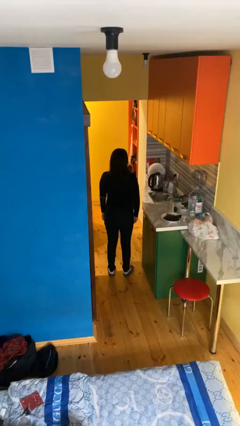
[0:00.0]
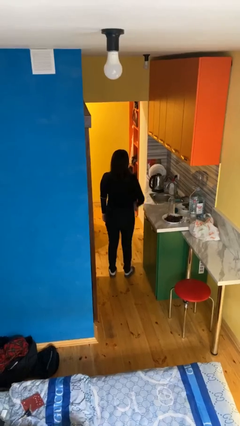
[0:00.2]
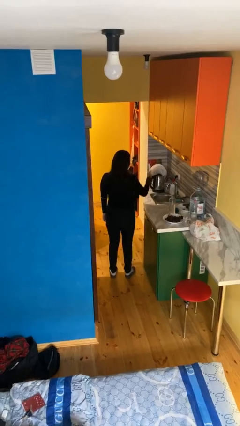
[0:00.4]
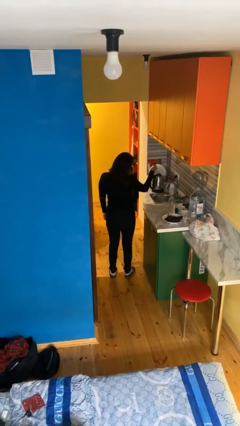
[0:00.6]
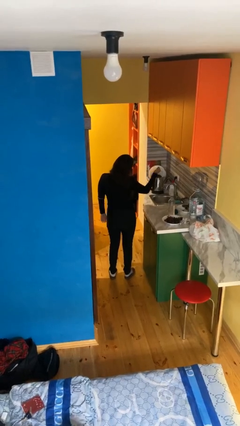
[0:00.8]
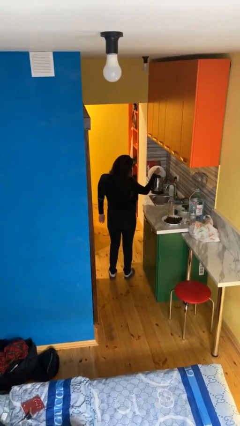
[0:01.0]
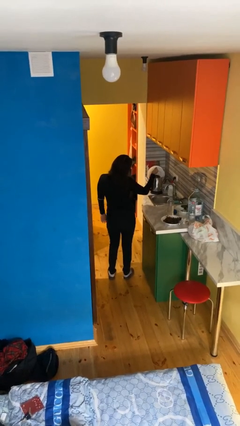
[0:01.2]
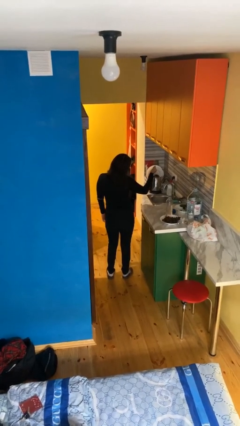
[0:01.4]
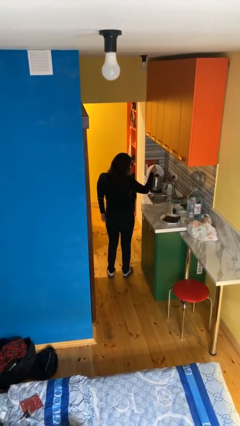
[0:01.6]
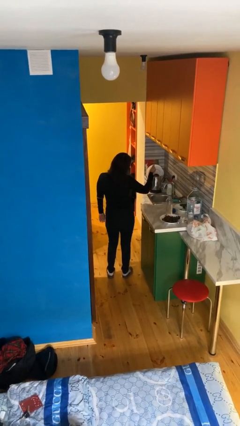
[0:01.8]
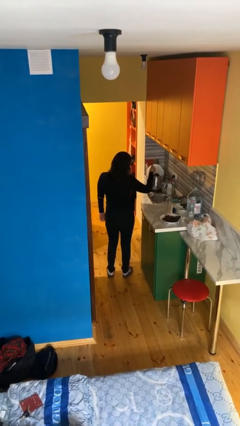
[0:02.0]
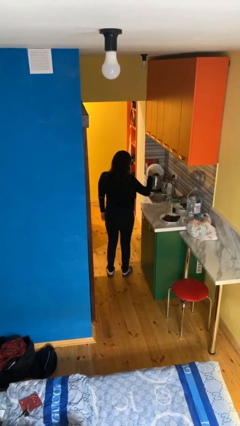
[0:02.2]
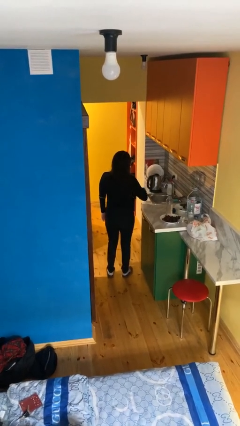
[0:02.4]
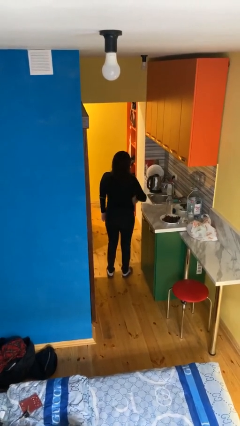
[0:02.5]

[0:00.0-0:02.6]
person gestures thumbs up

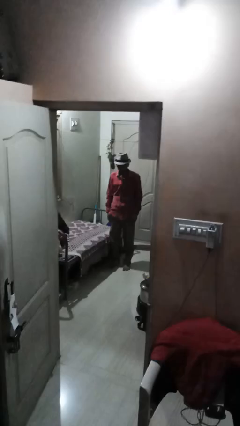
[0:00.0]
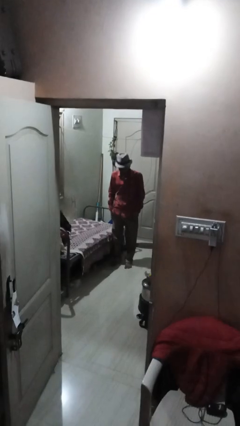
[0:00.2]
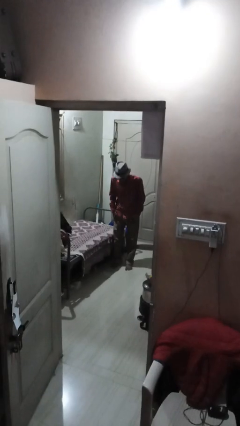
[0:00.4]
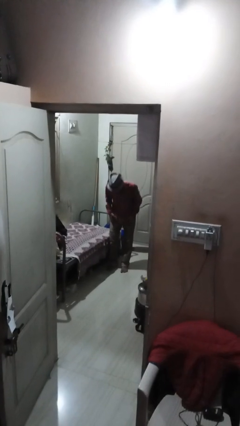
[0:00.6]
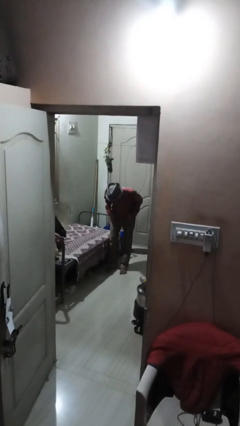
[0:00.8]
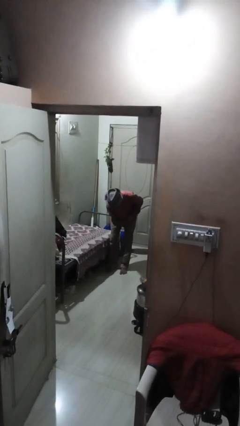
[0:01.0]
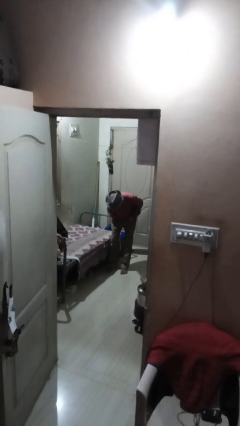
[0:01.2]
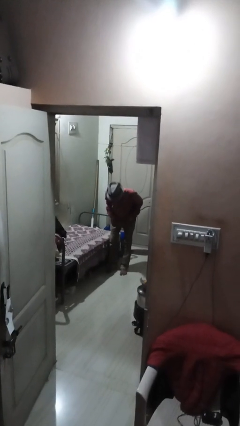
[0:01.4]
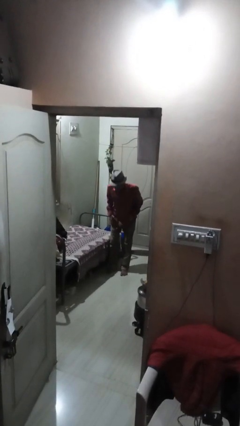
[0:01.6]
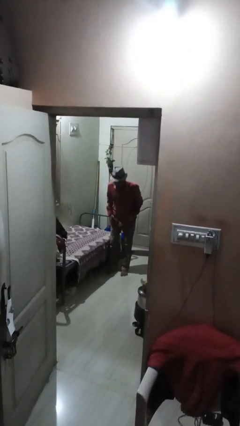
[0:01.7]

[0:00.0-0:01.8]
person bows

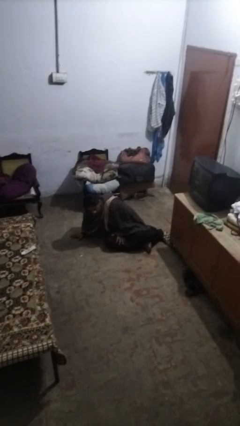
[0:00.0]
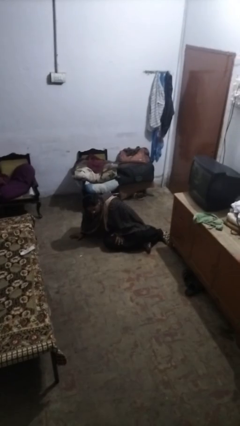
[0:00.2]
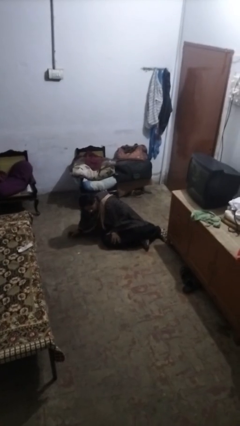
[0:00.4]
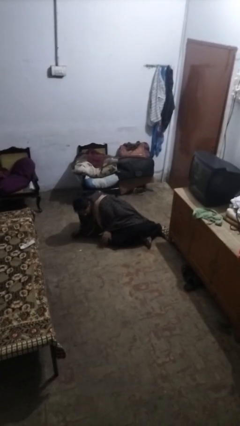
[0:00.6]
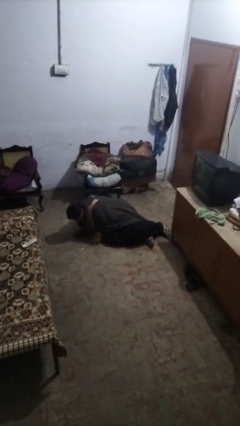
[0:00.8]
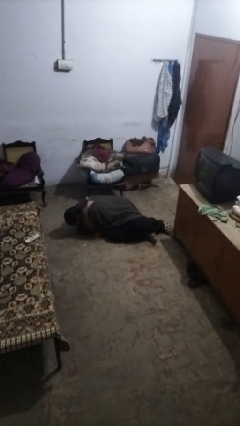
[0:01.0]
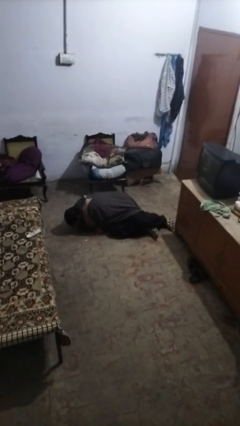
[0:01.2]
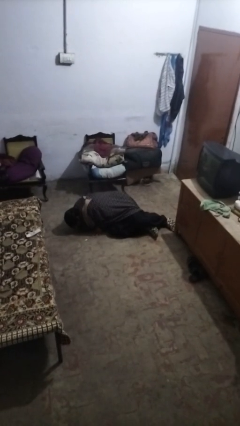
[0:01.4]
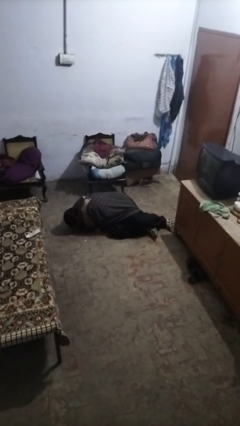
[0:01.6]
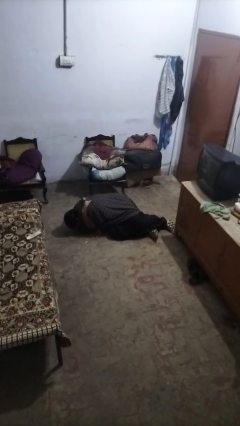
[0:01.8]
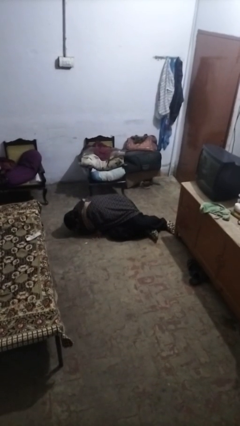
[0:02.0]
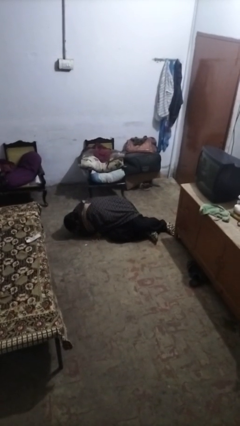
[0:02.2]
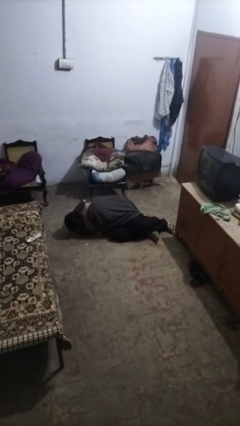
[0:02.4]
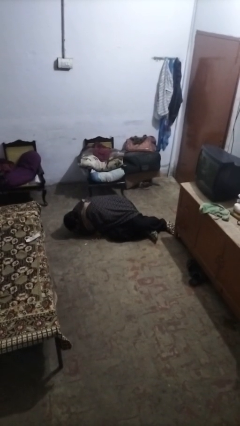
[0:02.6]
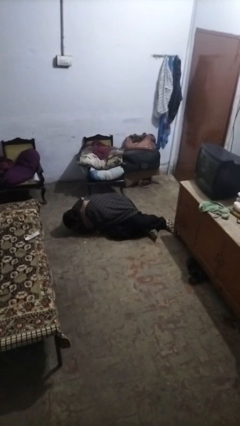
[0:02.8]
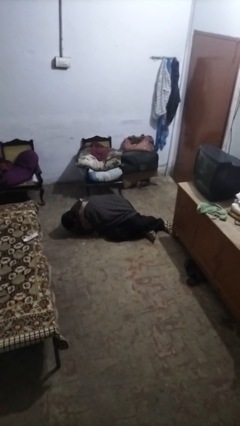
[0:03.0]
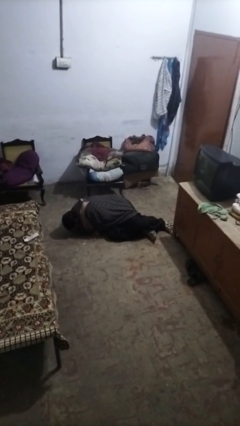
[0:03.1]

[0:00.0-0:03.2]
person lies down on floor

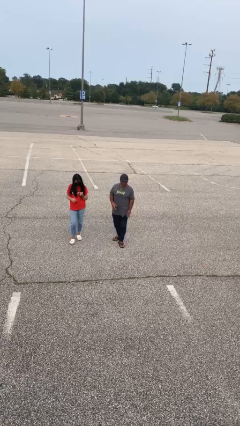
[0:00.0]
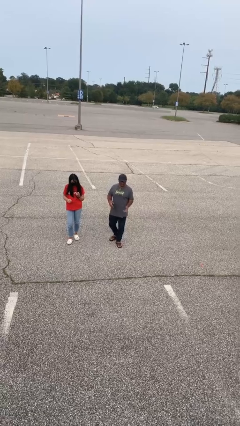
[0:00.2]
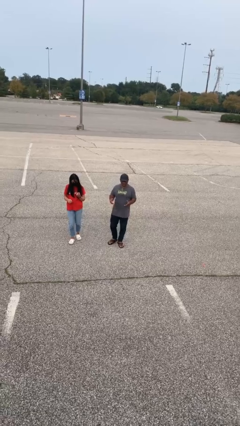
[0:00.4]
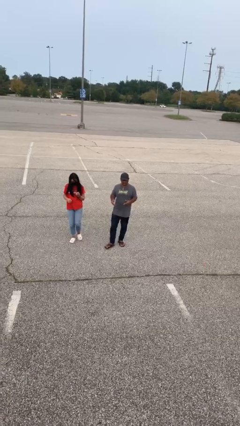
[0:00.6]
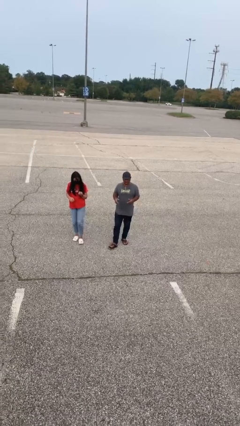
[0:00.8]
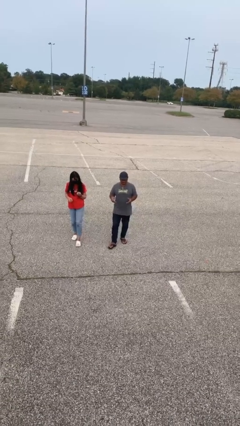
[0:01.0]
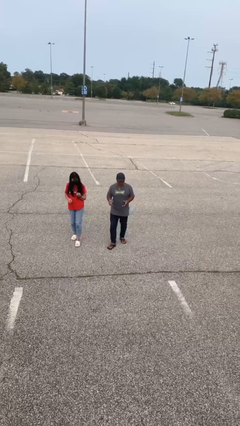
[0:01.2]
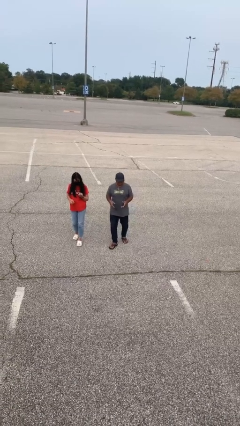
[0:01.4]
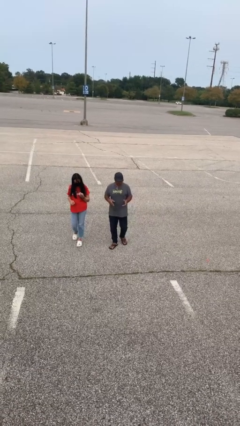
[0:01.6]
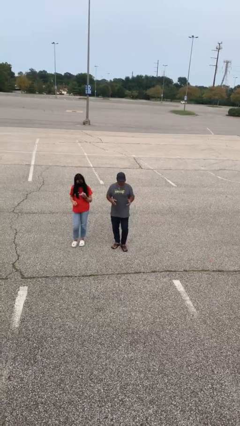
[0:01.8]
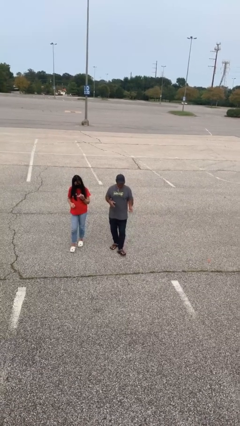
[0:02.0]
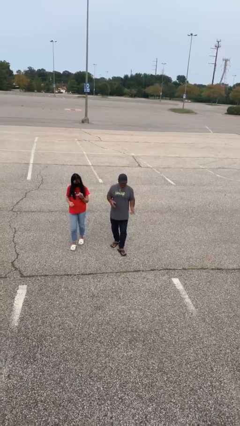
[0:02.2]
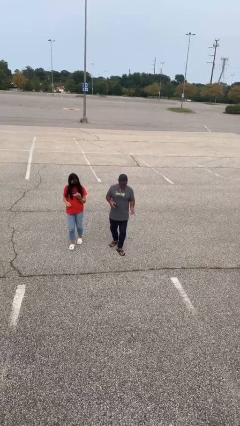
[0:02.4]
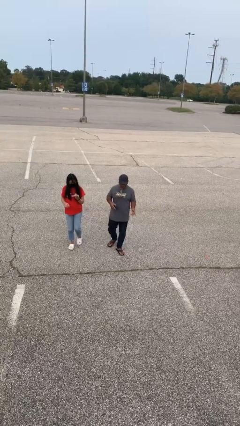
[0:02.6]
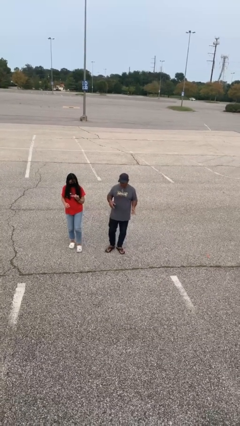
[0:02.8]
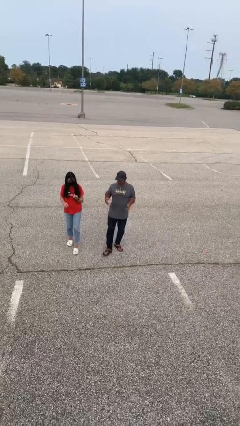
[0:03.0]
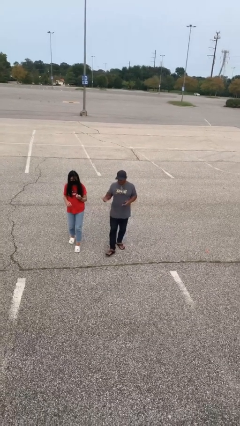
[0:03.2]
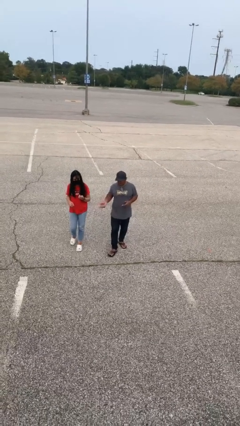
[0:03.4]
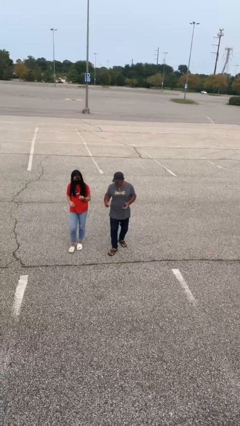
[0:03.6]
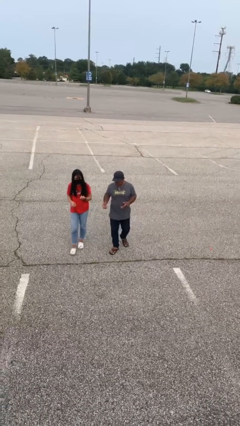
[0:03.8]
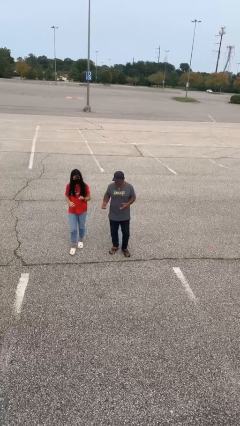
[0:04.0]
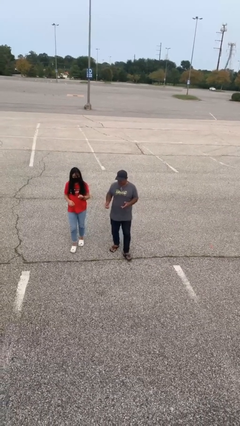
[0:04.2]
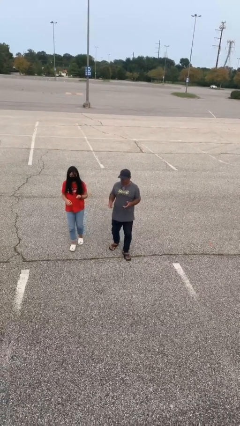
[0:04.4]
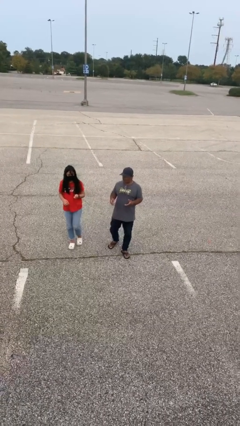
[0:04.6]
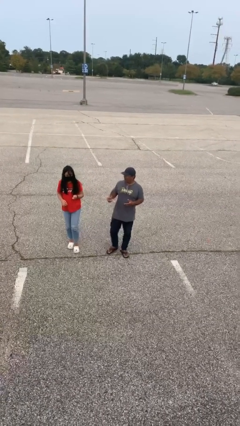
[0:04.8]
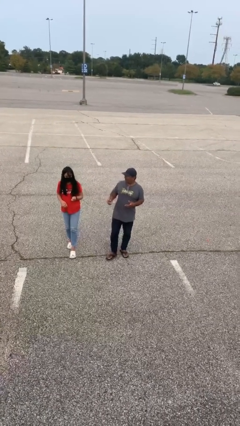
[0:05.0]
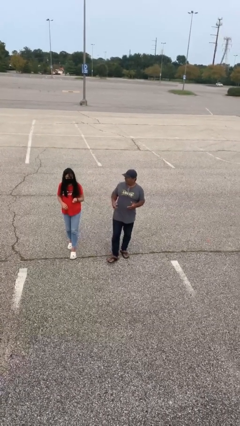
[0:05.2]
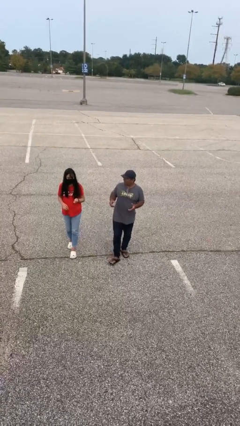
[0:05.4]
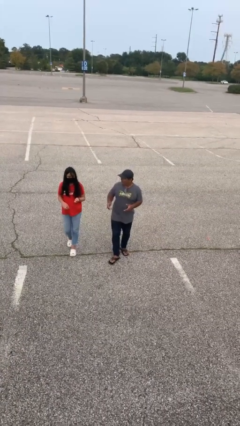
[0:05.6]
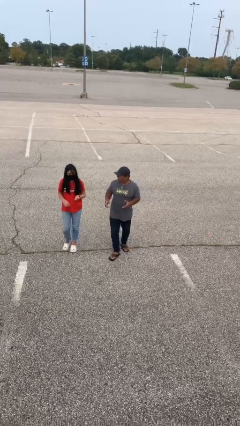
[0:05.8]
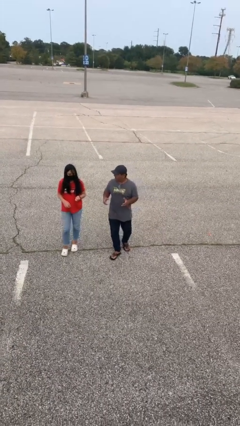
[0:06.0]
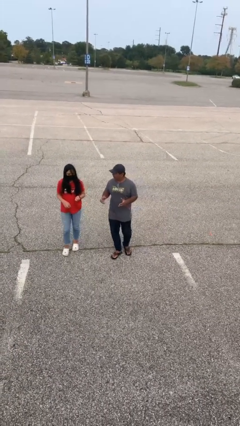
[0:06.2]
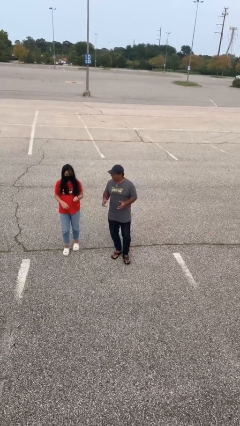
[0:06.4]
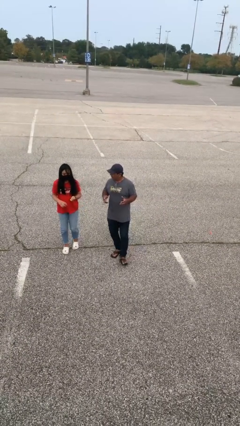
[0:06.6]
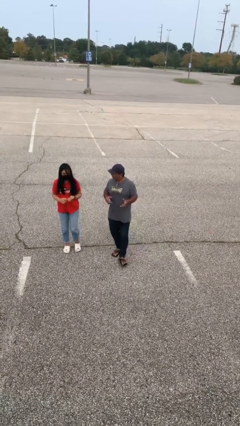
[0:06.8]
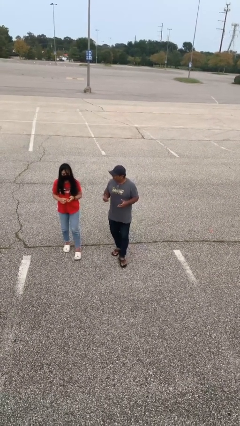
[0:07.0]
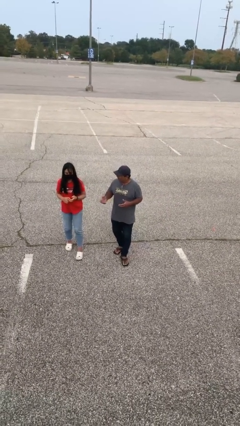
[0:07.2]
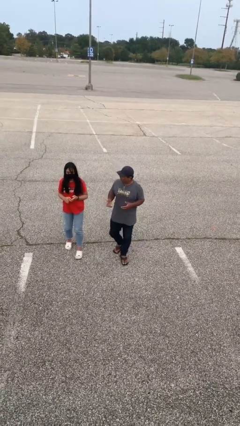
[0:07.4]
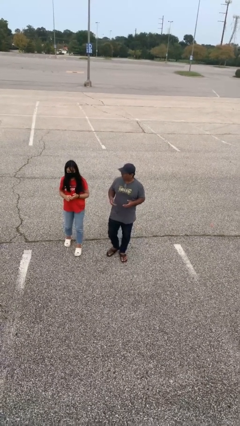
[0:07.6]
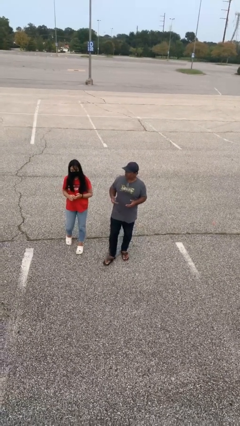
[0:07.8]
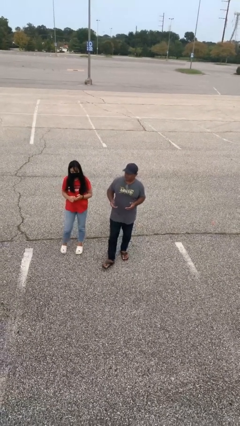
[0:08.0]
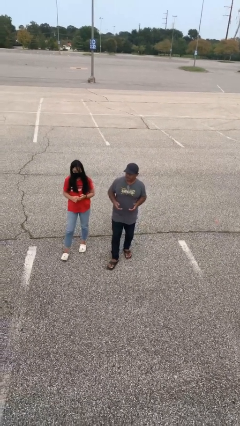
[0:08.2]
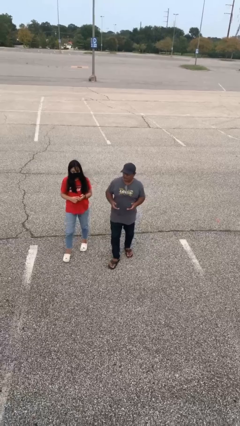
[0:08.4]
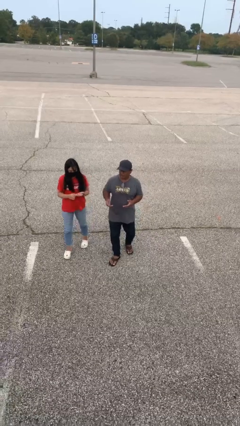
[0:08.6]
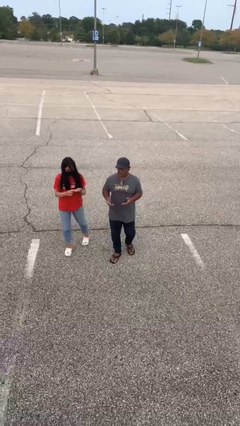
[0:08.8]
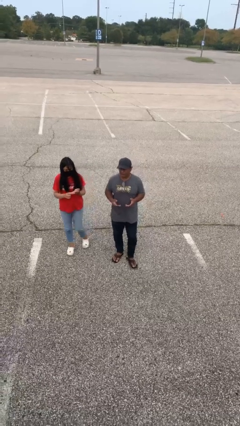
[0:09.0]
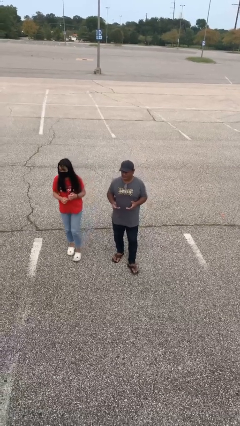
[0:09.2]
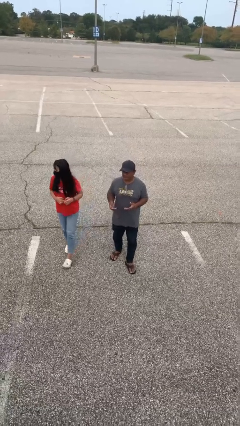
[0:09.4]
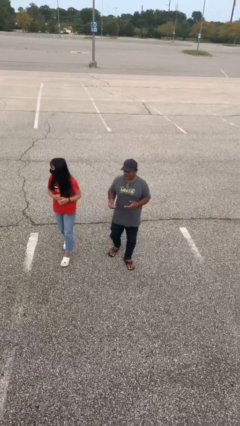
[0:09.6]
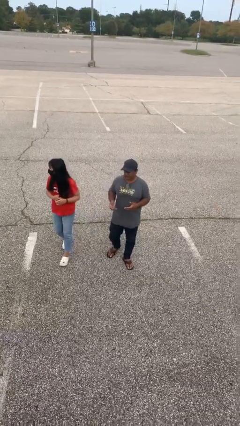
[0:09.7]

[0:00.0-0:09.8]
person talks to person

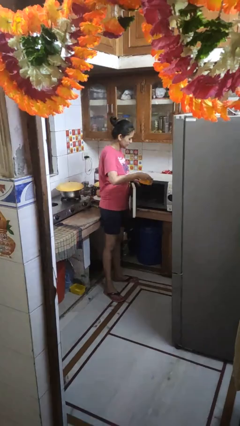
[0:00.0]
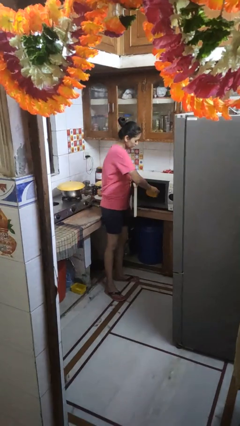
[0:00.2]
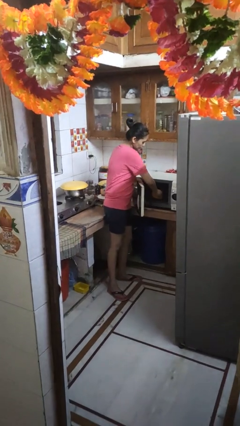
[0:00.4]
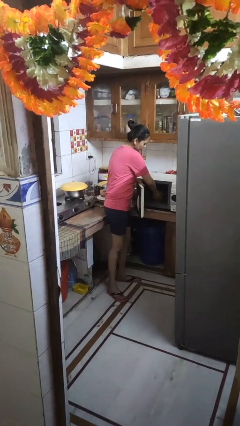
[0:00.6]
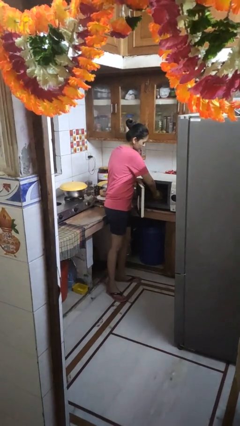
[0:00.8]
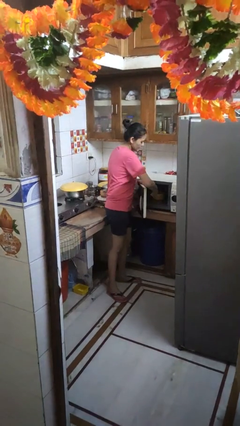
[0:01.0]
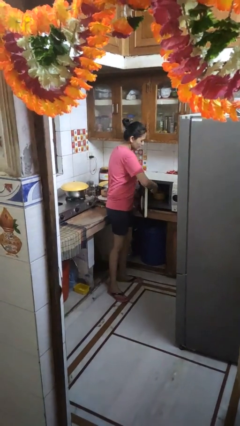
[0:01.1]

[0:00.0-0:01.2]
person puts object into microwave
